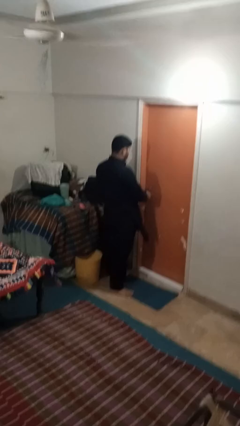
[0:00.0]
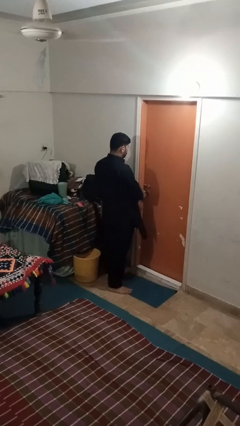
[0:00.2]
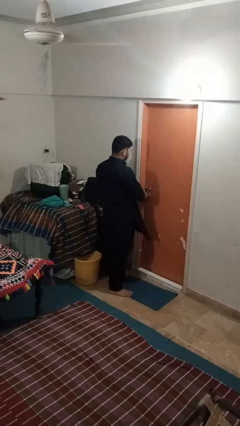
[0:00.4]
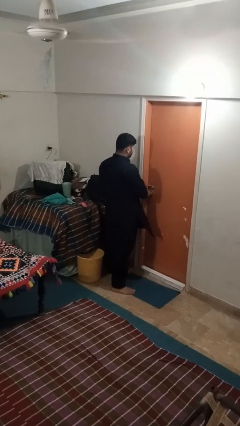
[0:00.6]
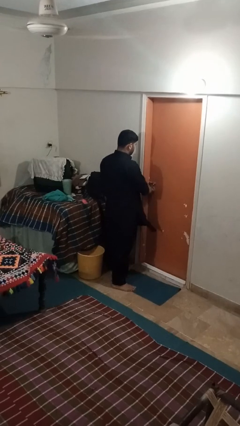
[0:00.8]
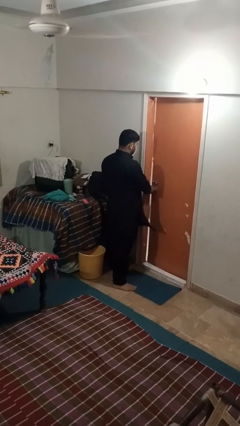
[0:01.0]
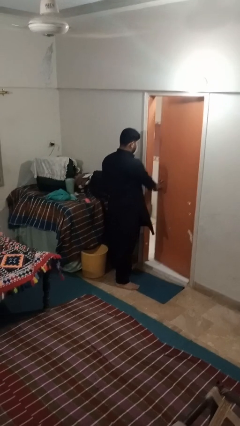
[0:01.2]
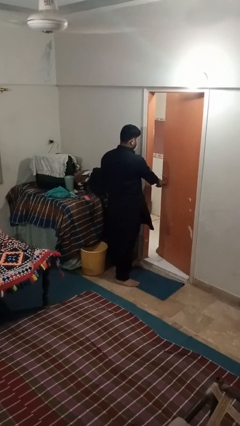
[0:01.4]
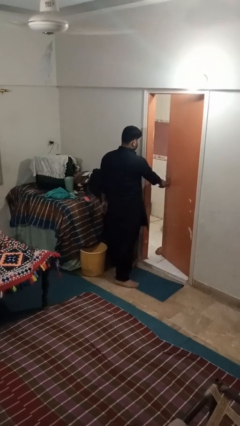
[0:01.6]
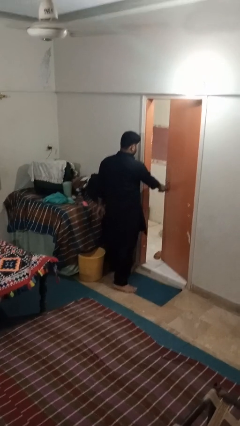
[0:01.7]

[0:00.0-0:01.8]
person opens facility door

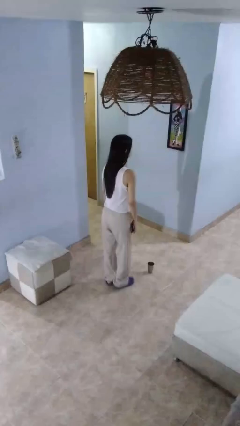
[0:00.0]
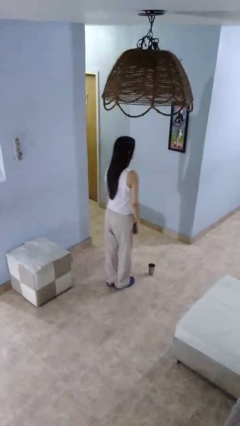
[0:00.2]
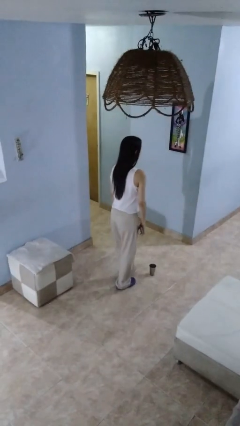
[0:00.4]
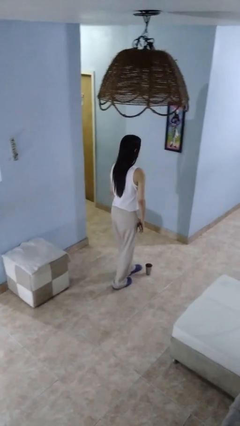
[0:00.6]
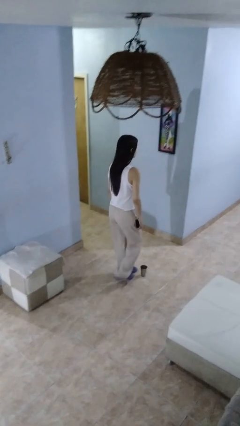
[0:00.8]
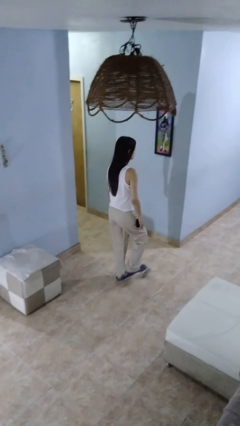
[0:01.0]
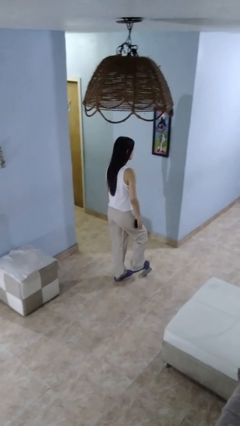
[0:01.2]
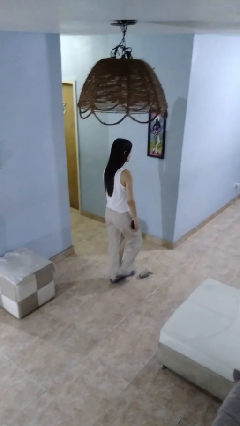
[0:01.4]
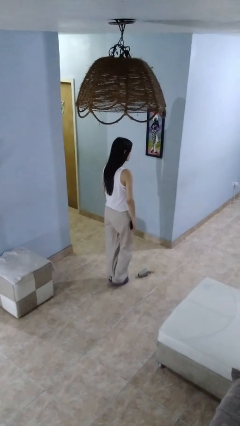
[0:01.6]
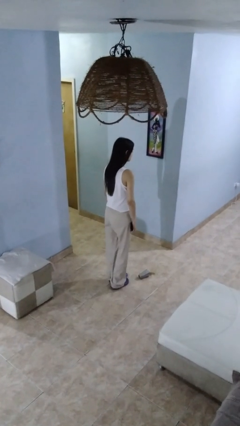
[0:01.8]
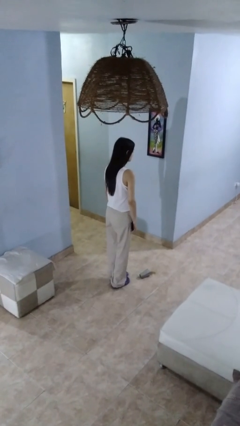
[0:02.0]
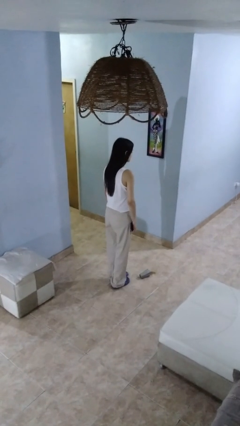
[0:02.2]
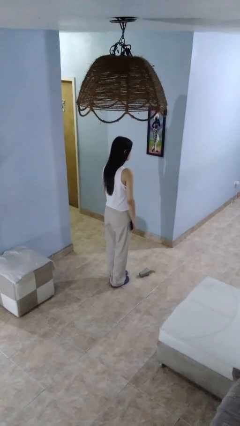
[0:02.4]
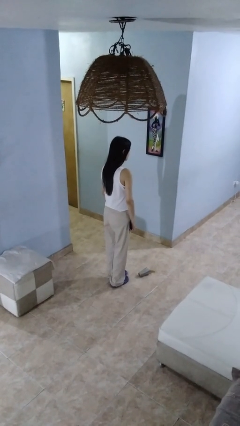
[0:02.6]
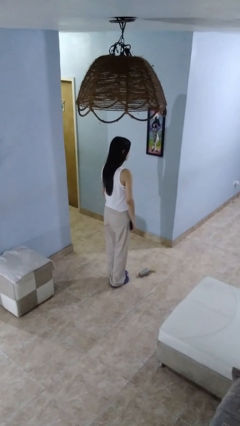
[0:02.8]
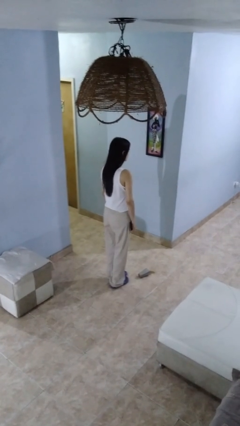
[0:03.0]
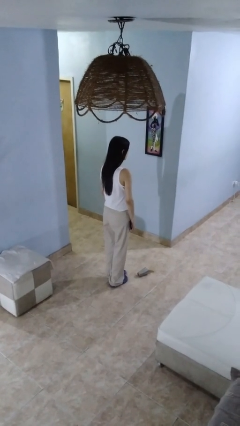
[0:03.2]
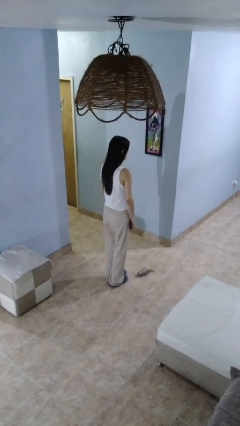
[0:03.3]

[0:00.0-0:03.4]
person spills on floor

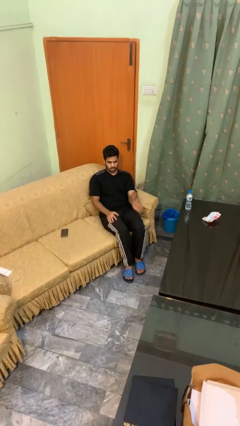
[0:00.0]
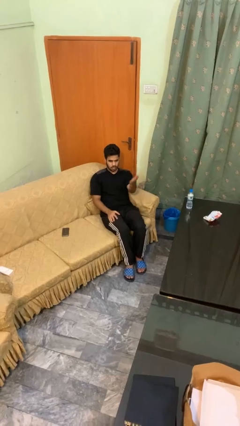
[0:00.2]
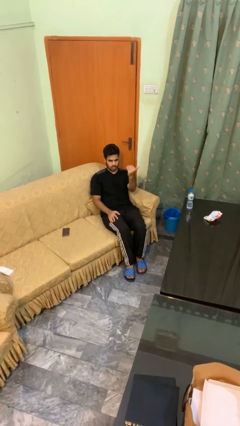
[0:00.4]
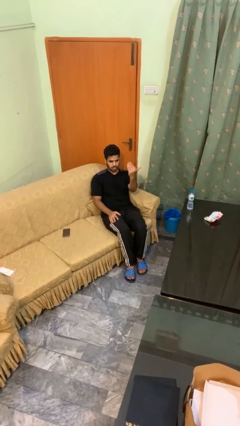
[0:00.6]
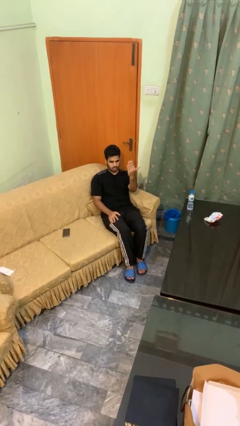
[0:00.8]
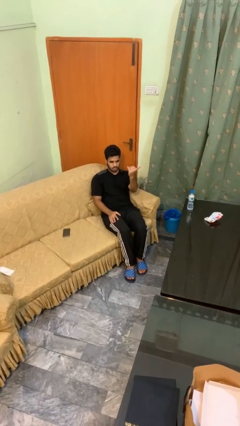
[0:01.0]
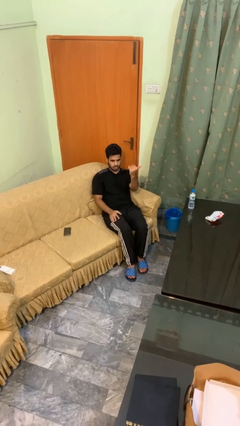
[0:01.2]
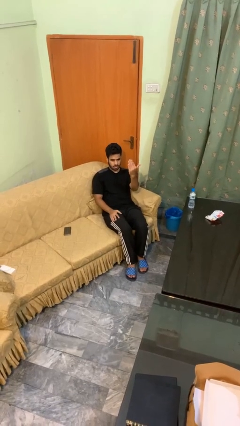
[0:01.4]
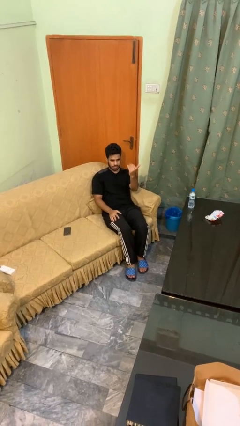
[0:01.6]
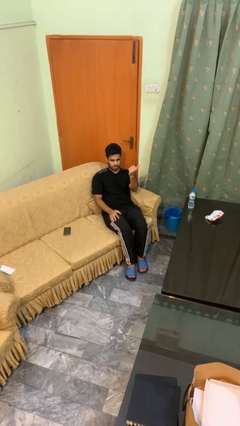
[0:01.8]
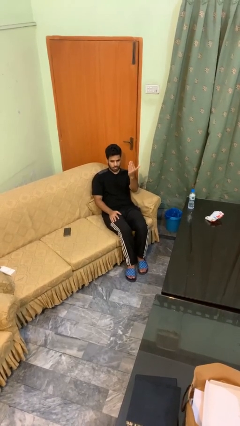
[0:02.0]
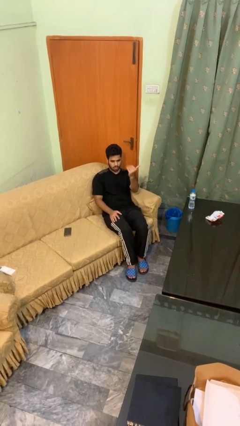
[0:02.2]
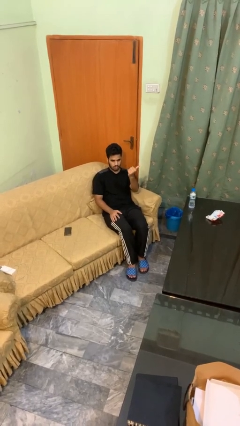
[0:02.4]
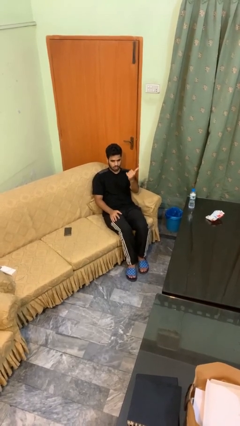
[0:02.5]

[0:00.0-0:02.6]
person gestures come here

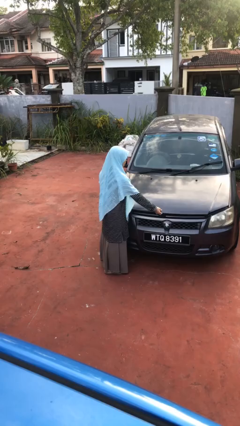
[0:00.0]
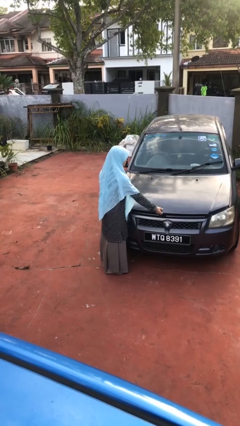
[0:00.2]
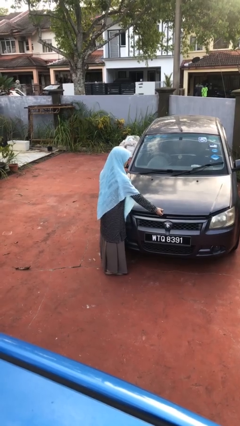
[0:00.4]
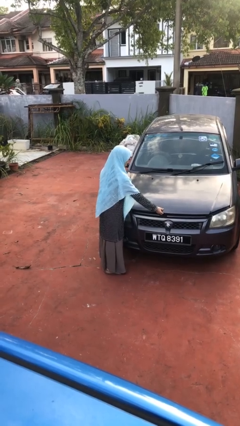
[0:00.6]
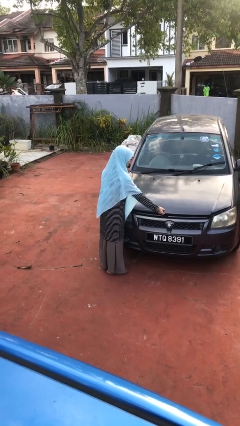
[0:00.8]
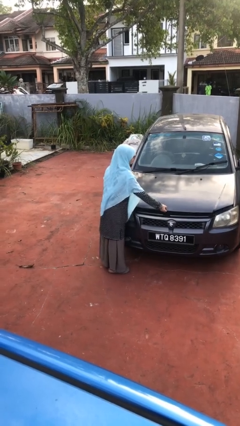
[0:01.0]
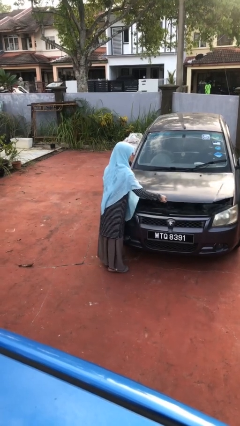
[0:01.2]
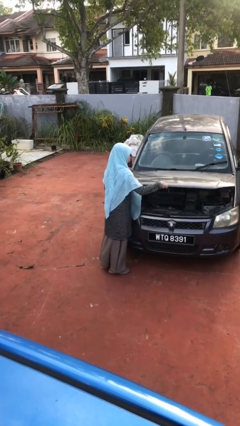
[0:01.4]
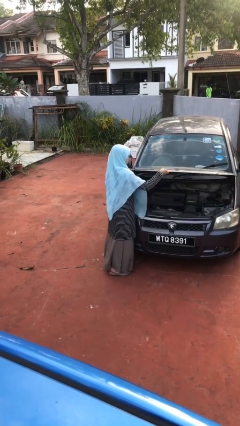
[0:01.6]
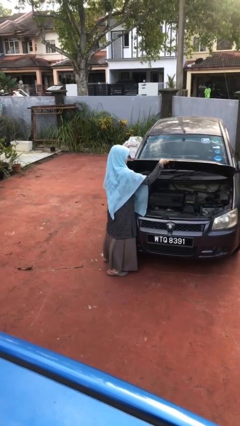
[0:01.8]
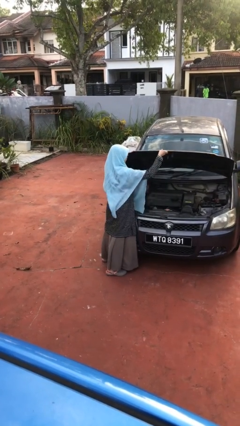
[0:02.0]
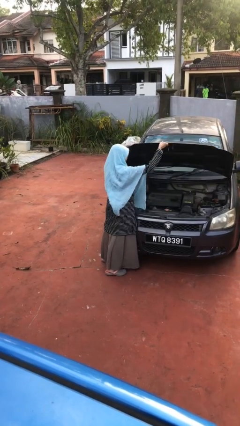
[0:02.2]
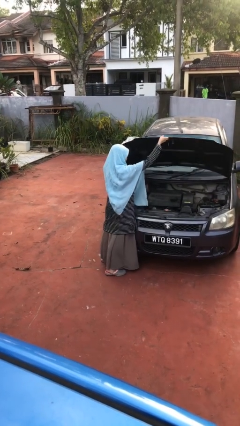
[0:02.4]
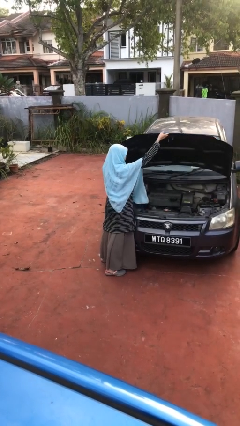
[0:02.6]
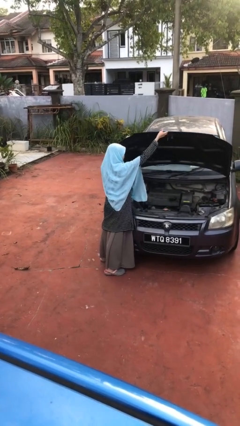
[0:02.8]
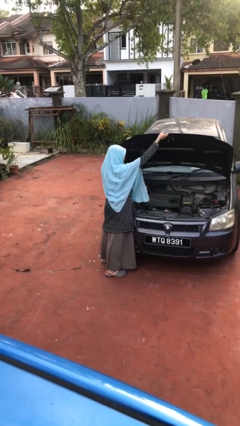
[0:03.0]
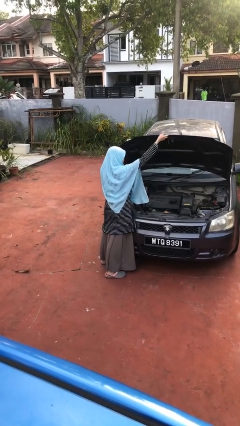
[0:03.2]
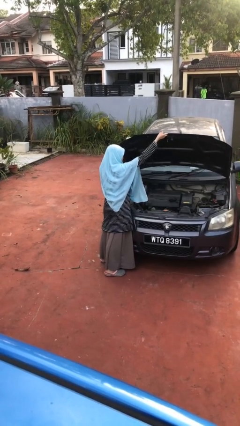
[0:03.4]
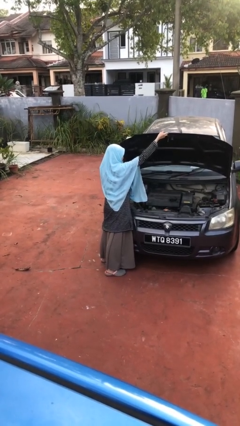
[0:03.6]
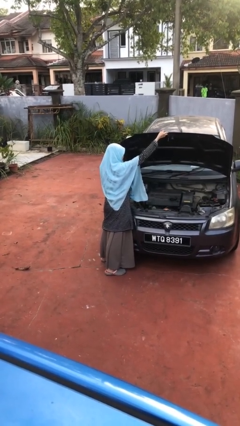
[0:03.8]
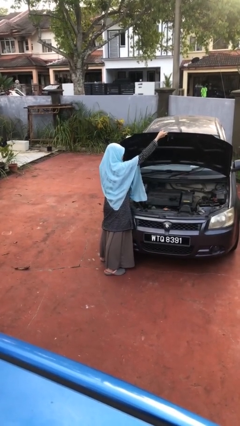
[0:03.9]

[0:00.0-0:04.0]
person opens car hood

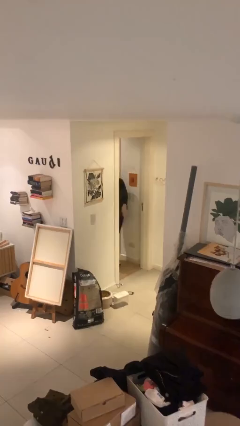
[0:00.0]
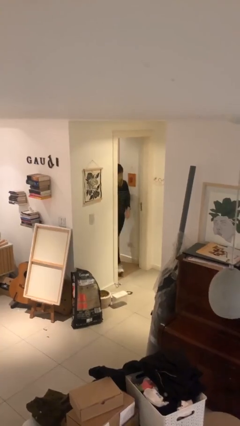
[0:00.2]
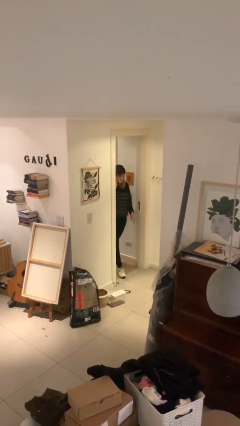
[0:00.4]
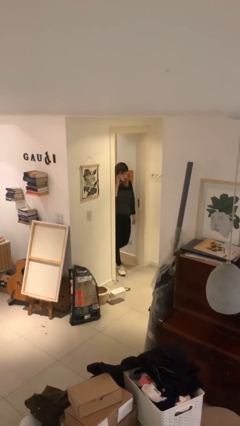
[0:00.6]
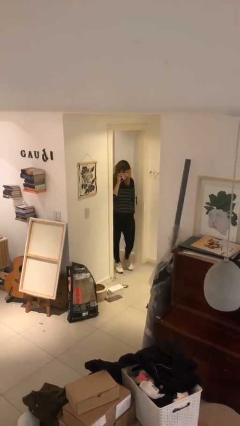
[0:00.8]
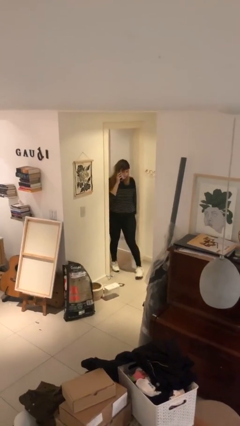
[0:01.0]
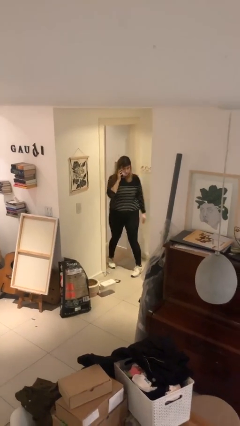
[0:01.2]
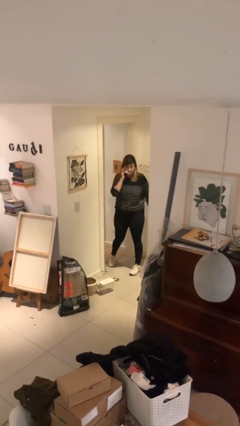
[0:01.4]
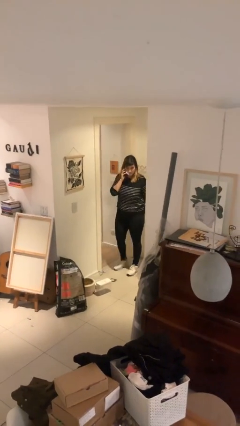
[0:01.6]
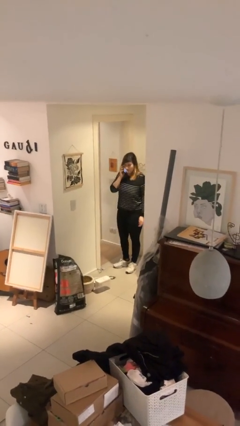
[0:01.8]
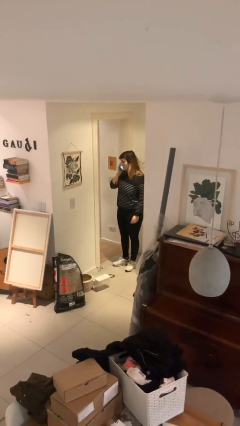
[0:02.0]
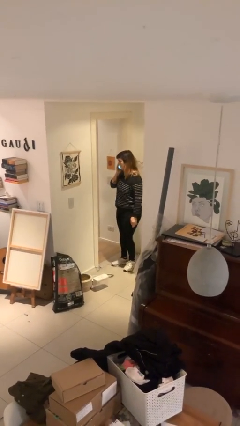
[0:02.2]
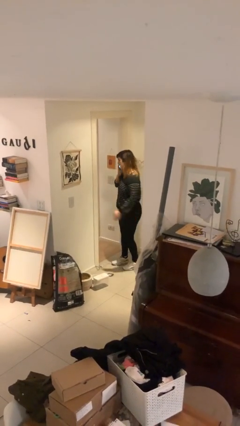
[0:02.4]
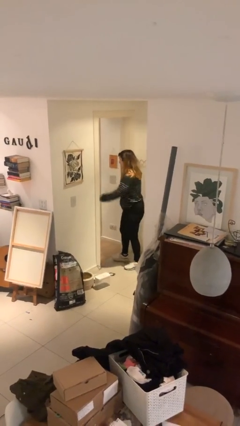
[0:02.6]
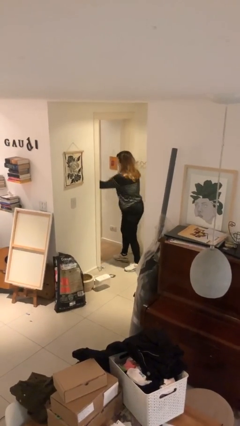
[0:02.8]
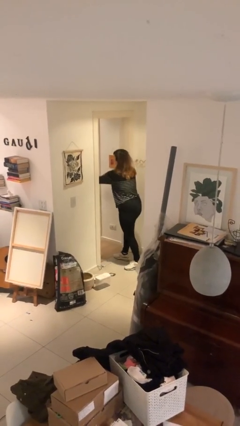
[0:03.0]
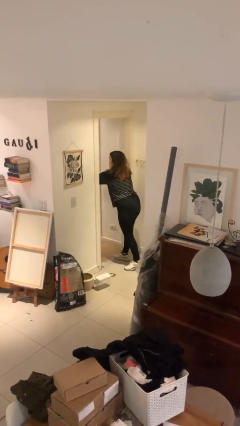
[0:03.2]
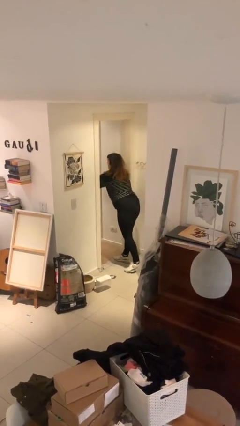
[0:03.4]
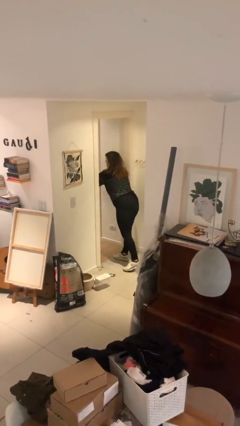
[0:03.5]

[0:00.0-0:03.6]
person enters scene through structure

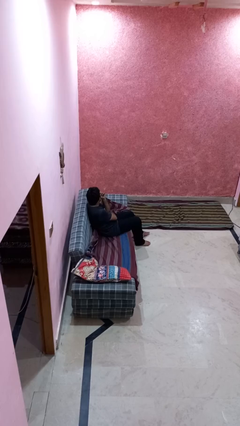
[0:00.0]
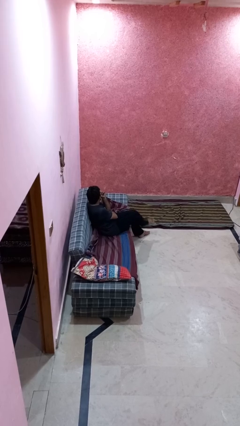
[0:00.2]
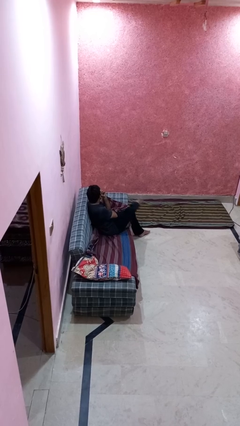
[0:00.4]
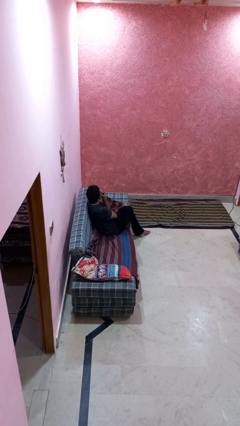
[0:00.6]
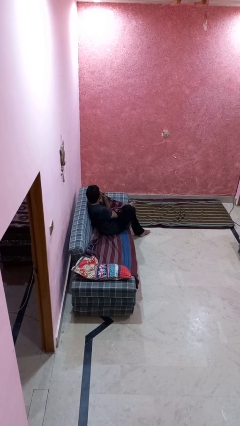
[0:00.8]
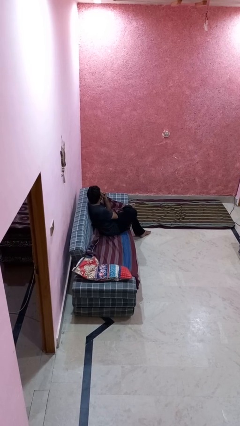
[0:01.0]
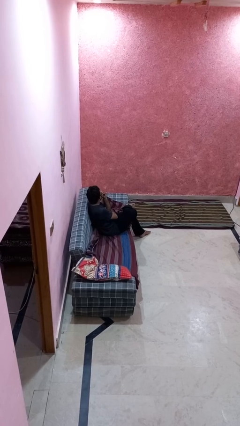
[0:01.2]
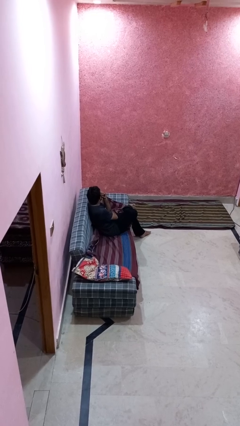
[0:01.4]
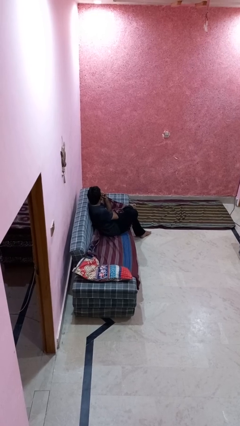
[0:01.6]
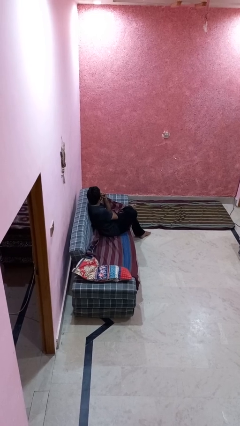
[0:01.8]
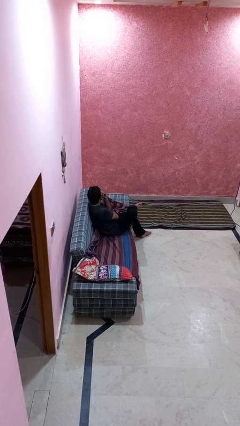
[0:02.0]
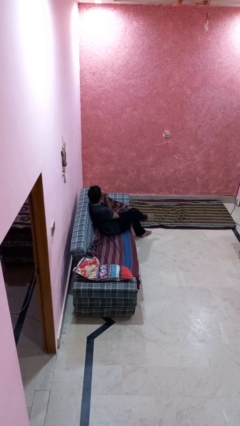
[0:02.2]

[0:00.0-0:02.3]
person crosses legs
